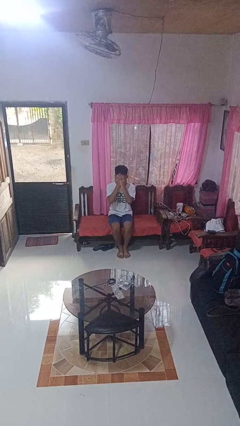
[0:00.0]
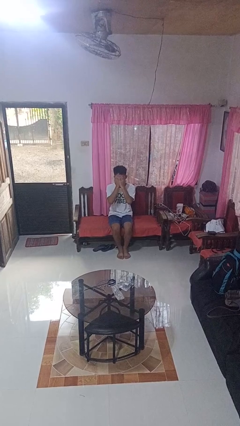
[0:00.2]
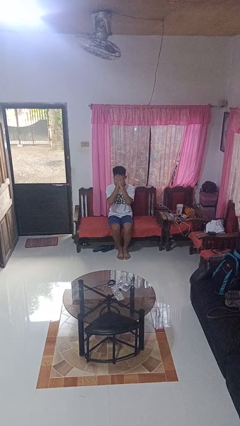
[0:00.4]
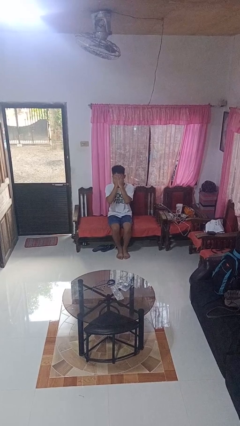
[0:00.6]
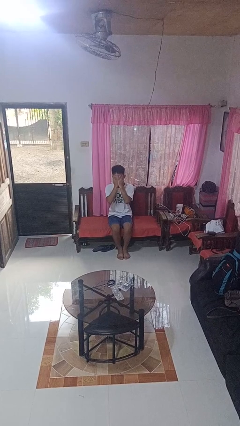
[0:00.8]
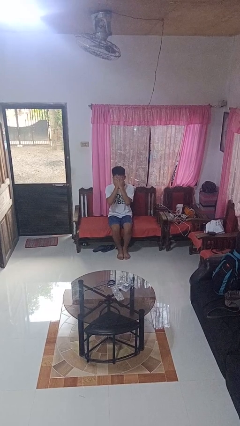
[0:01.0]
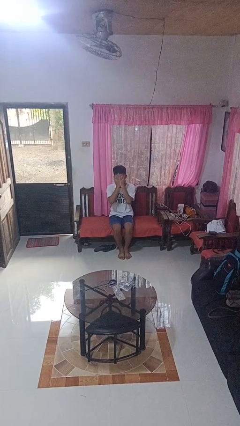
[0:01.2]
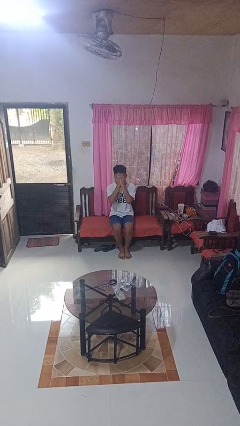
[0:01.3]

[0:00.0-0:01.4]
person covers face with hands

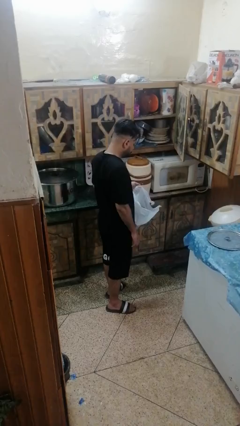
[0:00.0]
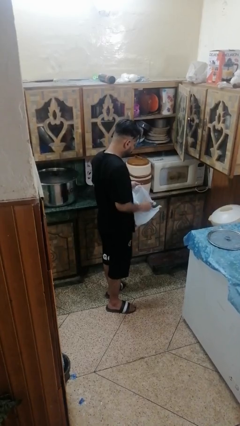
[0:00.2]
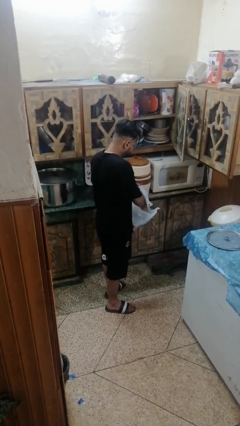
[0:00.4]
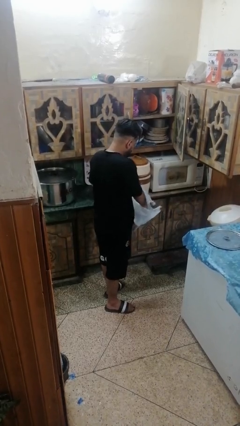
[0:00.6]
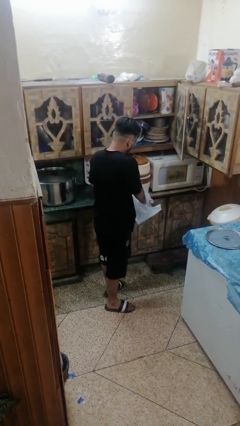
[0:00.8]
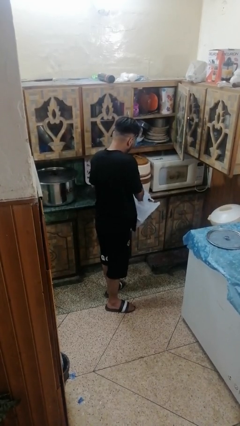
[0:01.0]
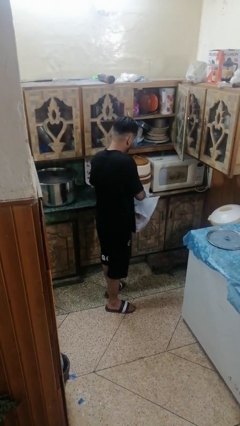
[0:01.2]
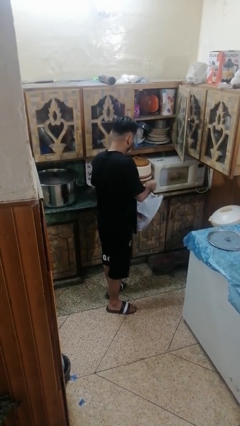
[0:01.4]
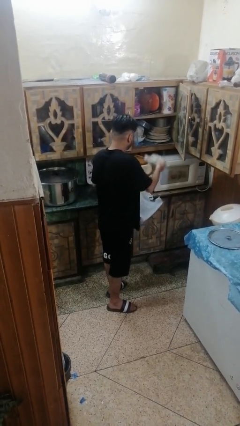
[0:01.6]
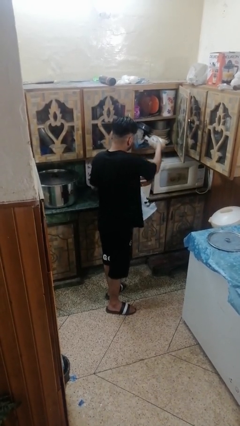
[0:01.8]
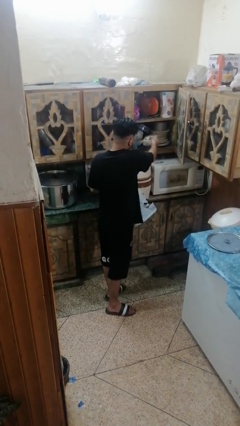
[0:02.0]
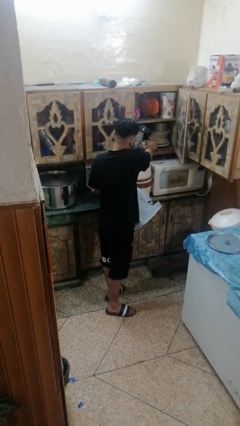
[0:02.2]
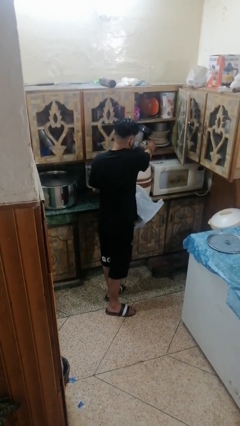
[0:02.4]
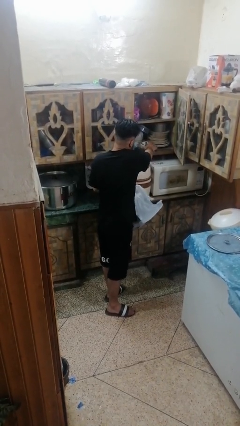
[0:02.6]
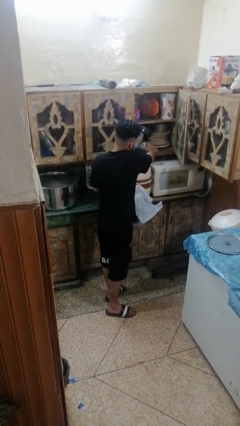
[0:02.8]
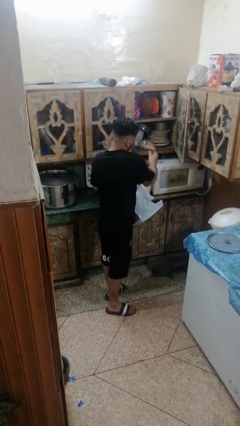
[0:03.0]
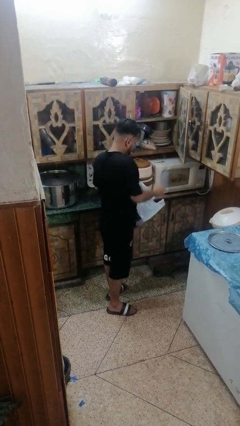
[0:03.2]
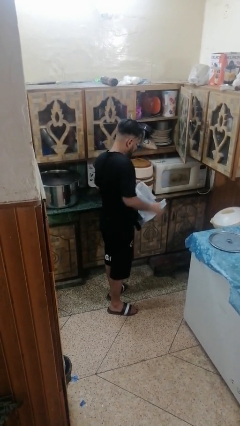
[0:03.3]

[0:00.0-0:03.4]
person loads groceries into cabinet

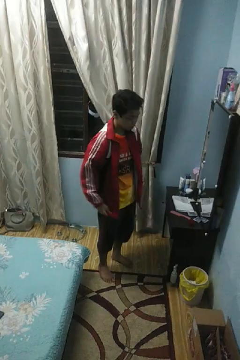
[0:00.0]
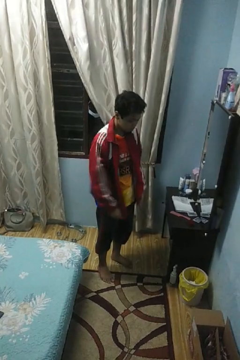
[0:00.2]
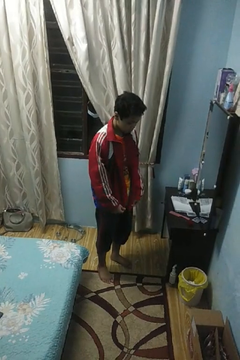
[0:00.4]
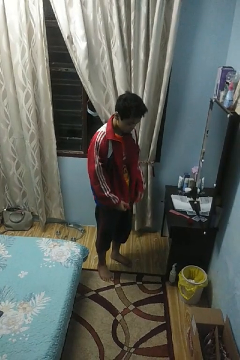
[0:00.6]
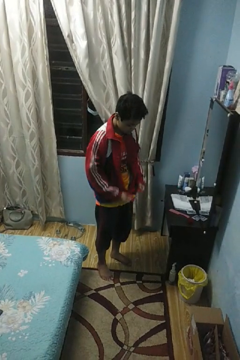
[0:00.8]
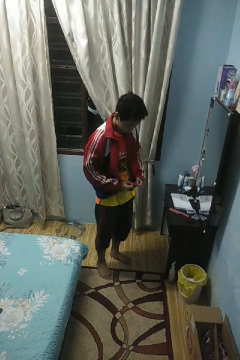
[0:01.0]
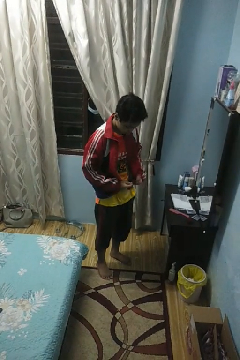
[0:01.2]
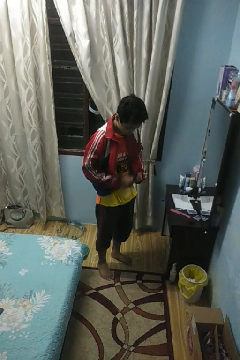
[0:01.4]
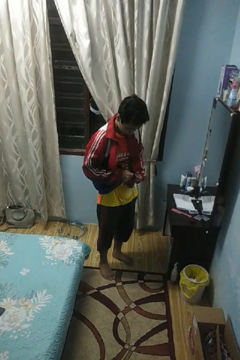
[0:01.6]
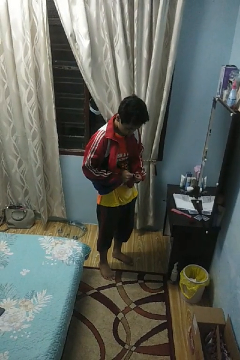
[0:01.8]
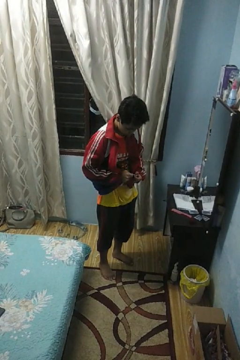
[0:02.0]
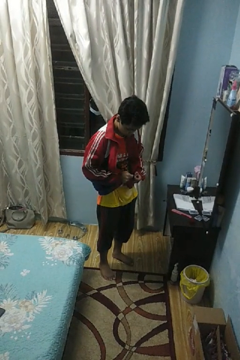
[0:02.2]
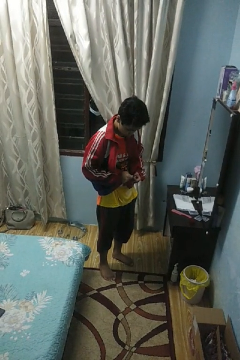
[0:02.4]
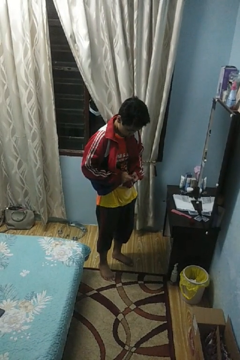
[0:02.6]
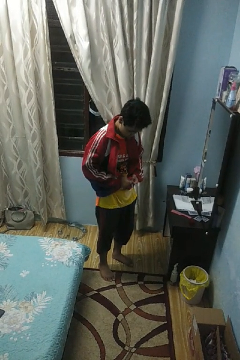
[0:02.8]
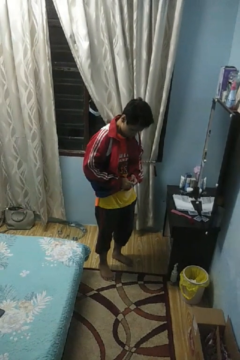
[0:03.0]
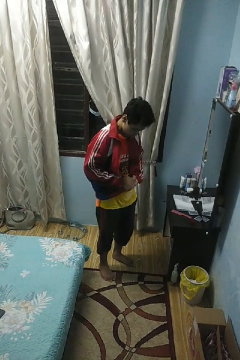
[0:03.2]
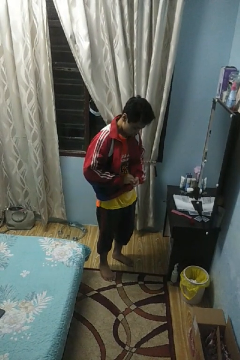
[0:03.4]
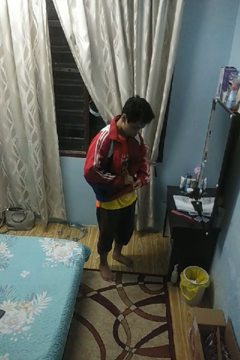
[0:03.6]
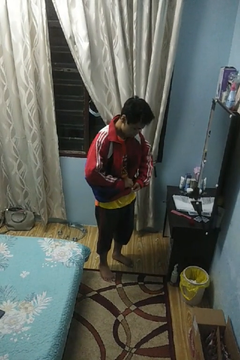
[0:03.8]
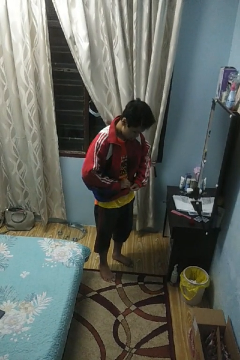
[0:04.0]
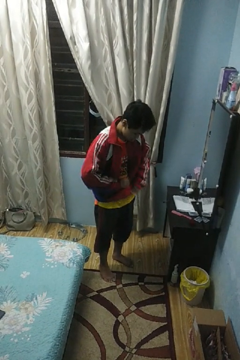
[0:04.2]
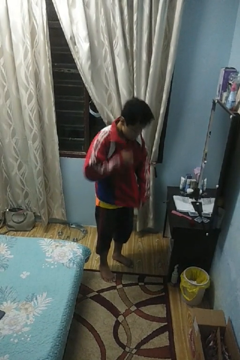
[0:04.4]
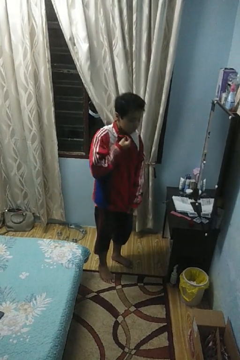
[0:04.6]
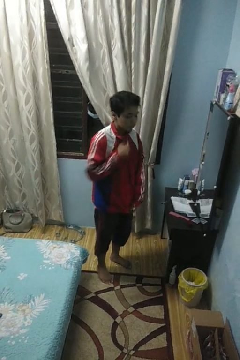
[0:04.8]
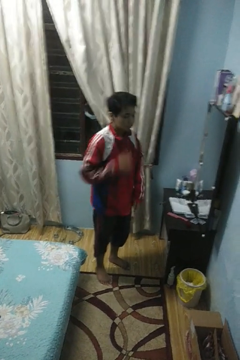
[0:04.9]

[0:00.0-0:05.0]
person zips up jacket

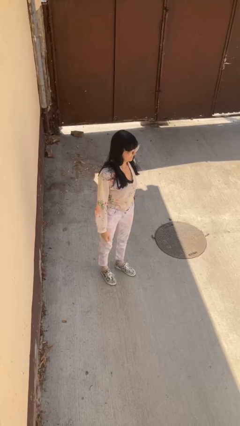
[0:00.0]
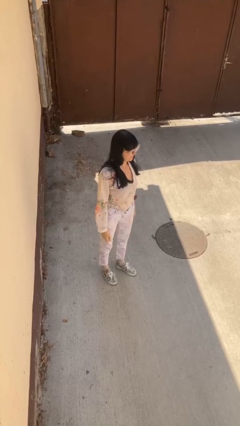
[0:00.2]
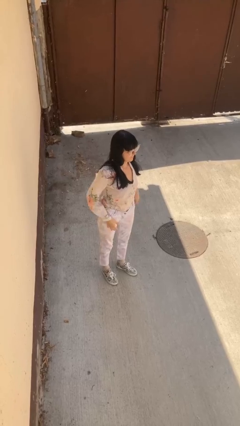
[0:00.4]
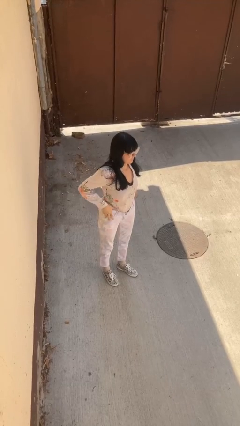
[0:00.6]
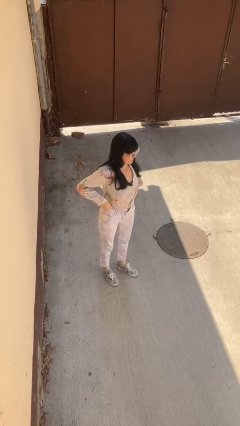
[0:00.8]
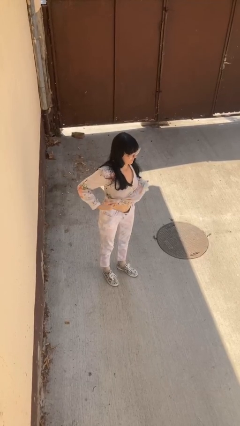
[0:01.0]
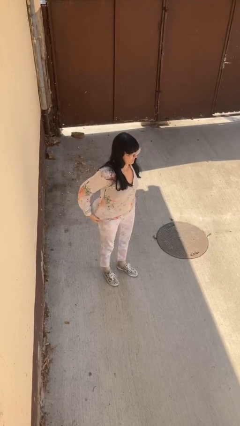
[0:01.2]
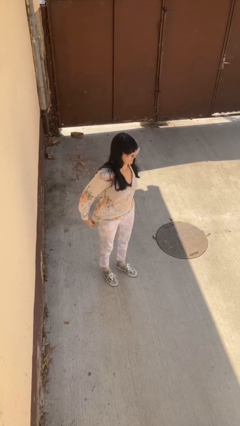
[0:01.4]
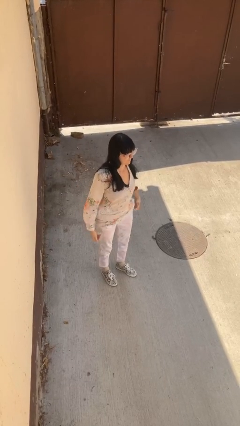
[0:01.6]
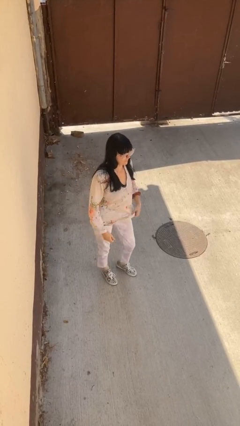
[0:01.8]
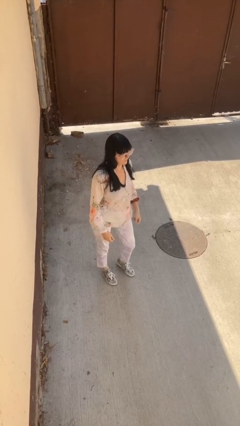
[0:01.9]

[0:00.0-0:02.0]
person untucks shirt

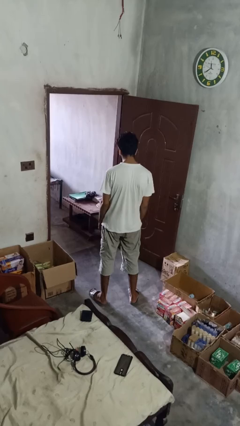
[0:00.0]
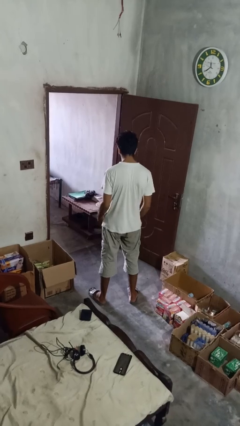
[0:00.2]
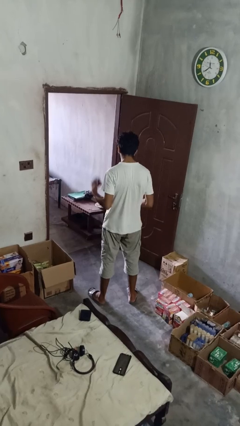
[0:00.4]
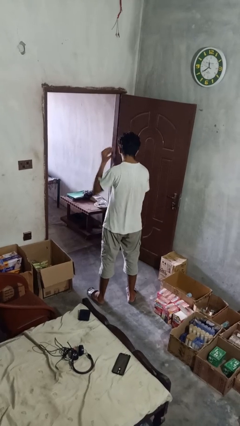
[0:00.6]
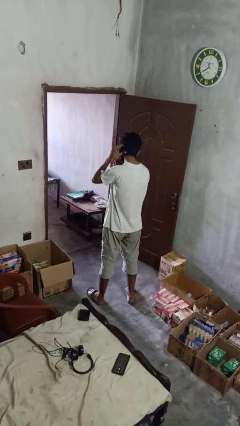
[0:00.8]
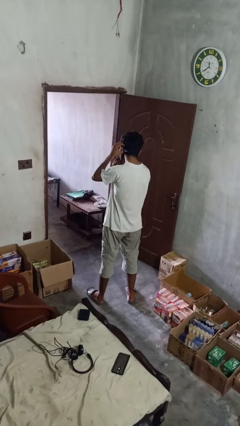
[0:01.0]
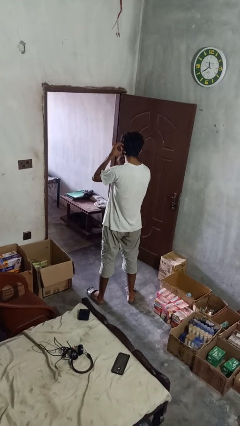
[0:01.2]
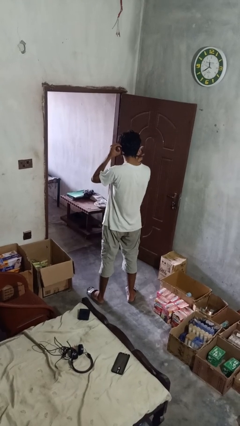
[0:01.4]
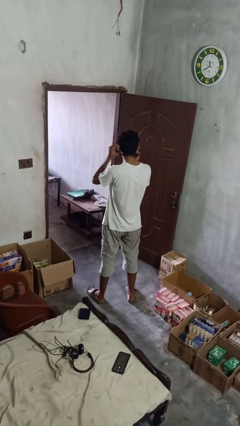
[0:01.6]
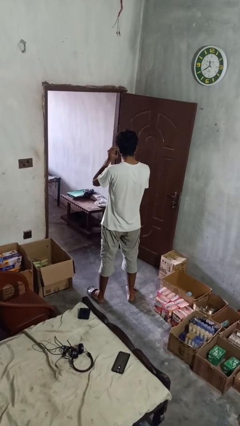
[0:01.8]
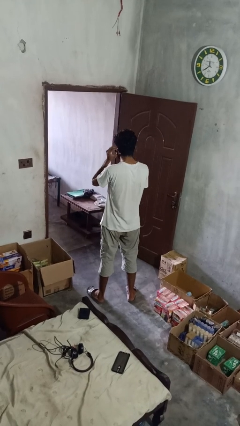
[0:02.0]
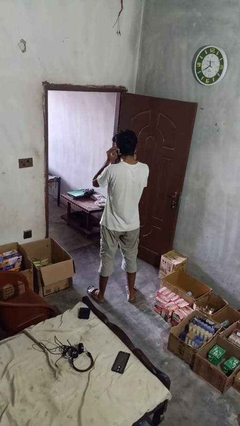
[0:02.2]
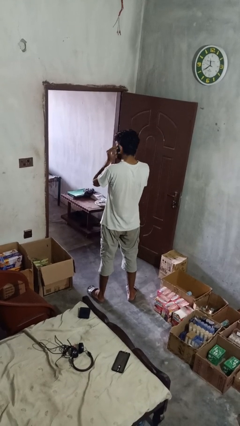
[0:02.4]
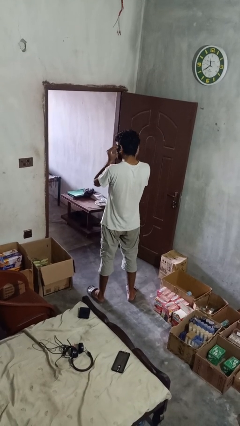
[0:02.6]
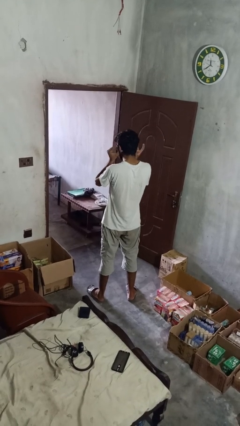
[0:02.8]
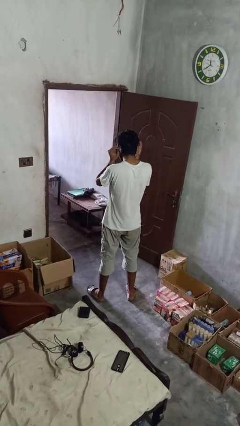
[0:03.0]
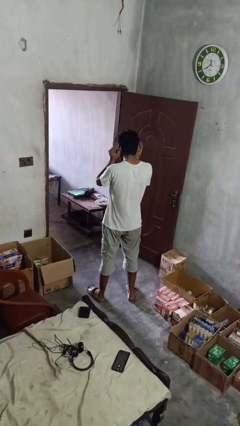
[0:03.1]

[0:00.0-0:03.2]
person puts on facemask

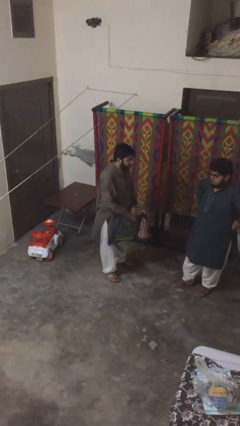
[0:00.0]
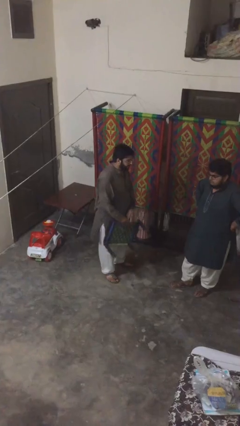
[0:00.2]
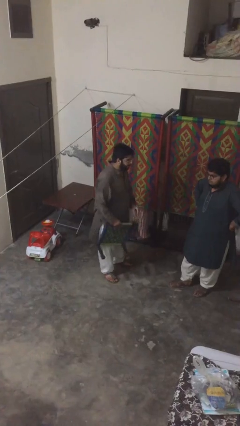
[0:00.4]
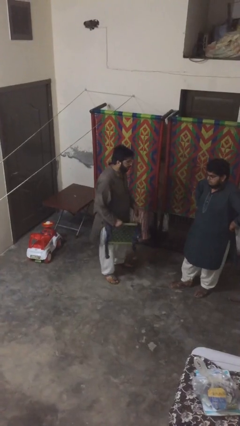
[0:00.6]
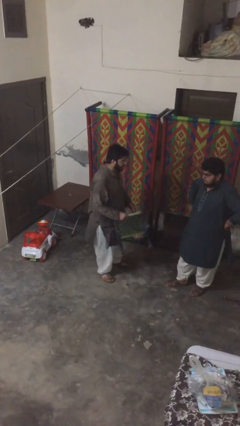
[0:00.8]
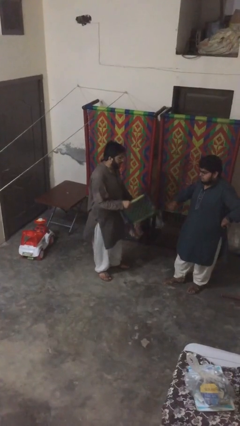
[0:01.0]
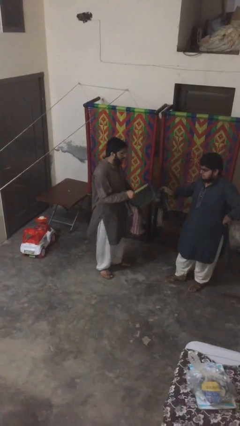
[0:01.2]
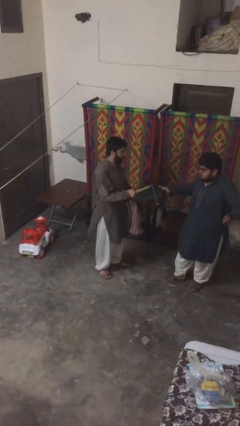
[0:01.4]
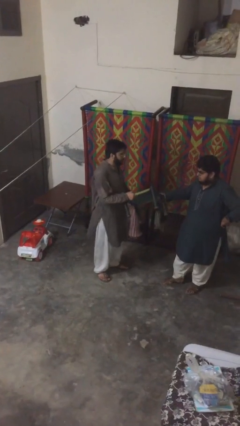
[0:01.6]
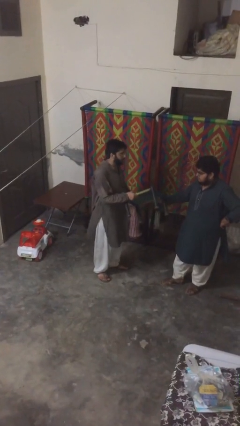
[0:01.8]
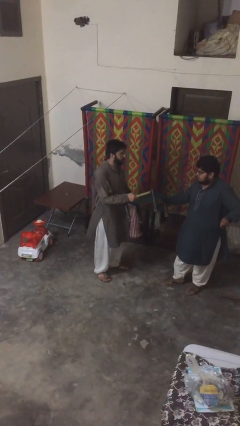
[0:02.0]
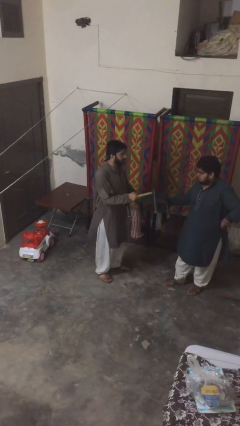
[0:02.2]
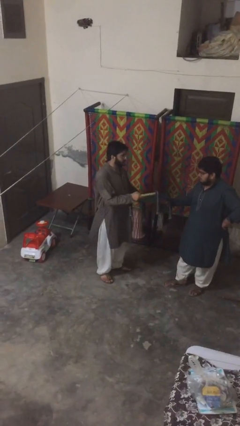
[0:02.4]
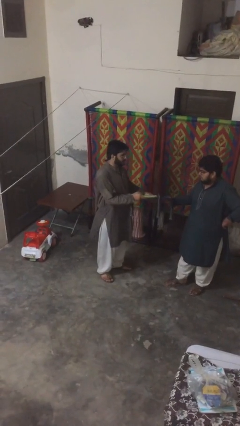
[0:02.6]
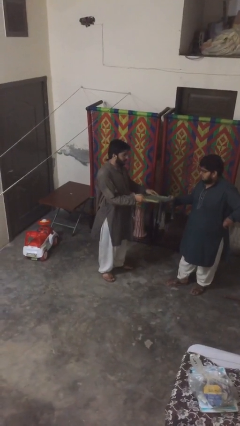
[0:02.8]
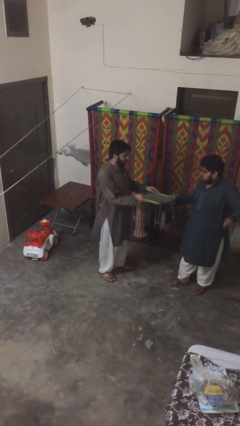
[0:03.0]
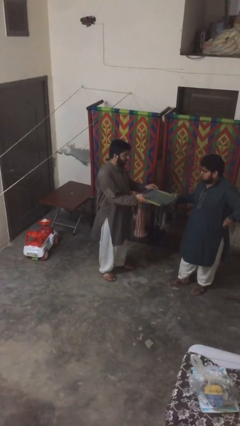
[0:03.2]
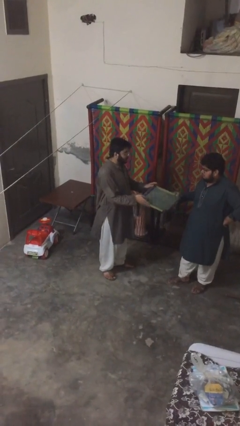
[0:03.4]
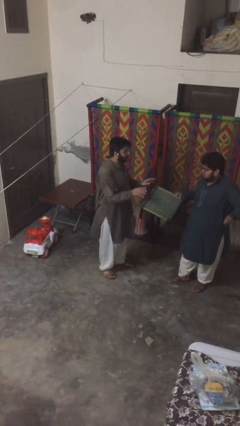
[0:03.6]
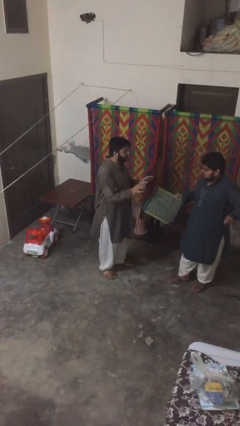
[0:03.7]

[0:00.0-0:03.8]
person transfers object to person
